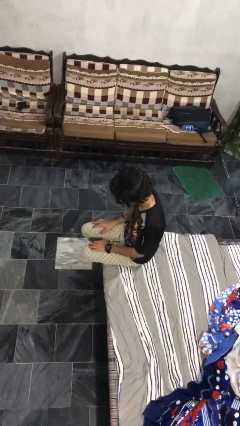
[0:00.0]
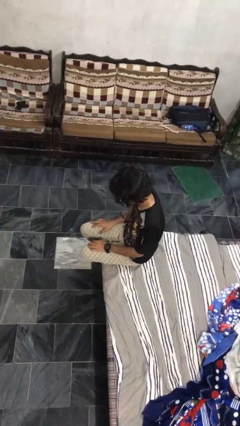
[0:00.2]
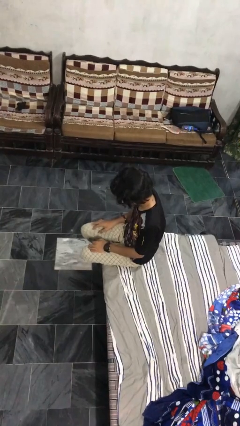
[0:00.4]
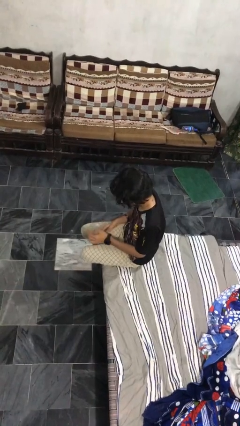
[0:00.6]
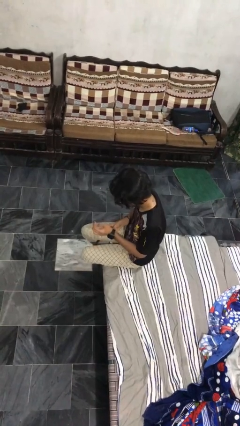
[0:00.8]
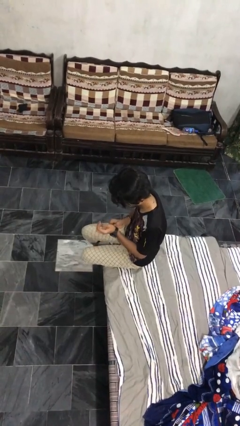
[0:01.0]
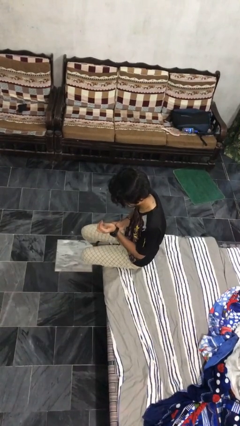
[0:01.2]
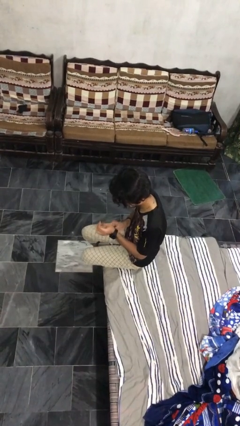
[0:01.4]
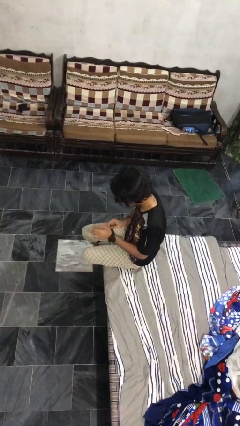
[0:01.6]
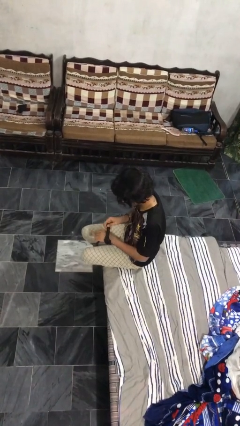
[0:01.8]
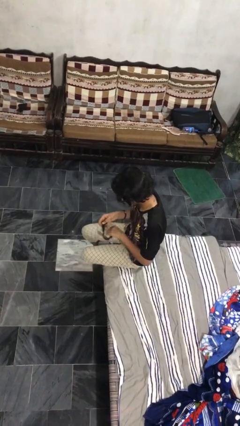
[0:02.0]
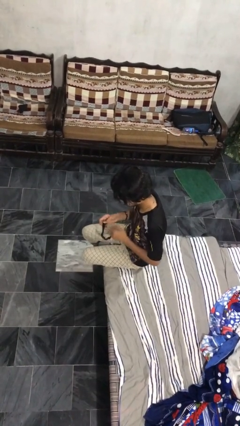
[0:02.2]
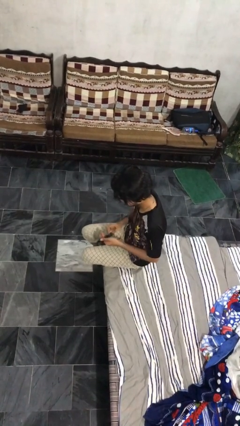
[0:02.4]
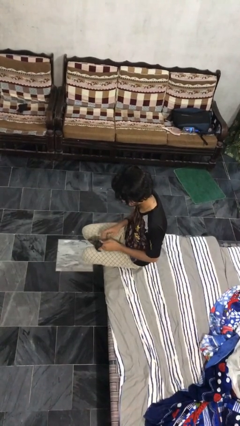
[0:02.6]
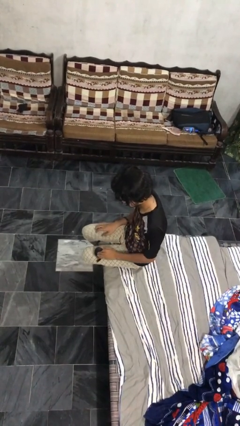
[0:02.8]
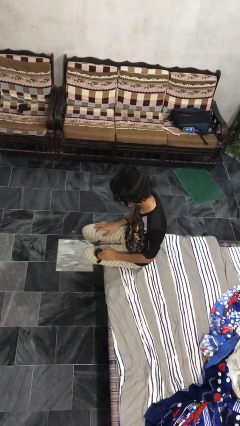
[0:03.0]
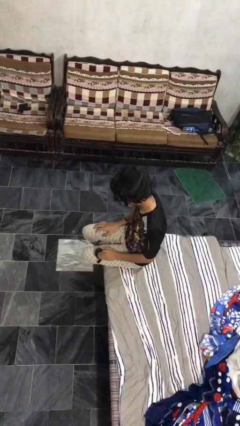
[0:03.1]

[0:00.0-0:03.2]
person takes off wristwatch

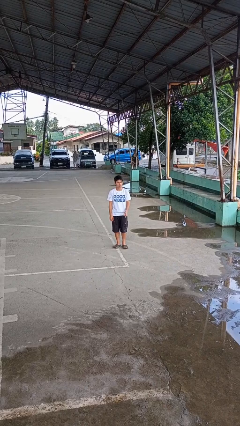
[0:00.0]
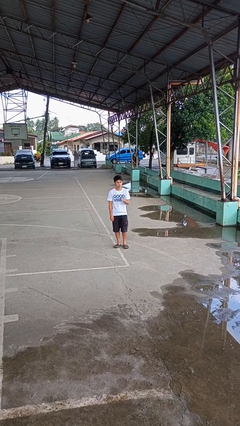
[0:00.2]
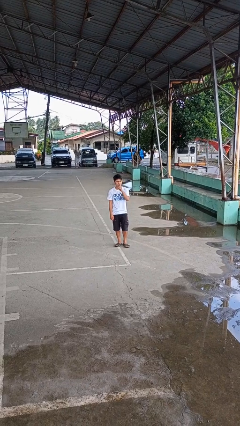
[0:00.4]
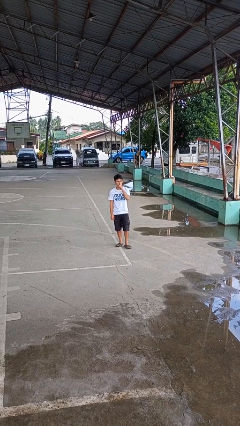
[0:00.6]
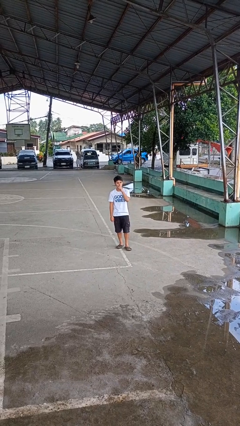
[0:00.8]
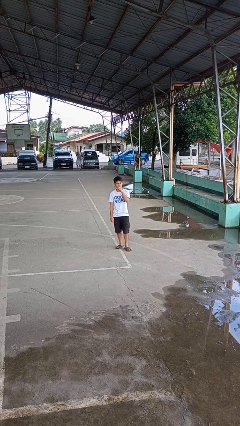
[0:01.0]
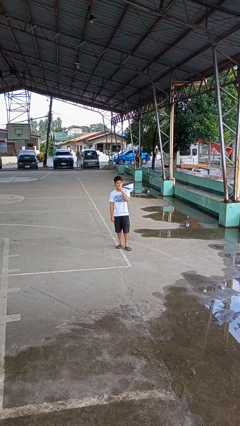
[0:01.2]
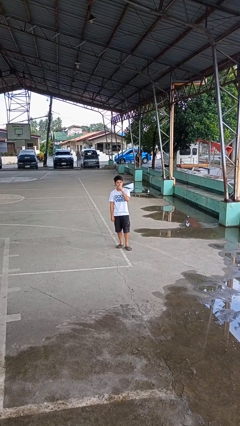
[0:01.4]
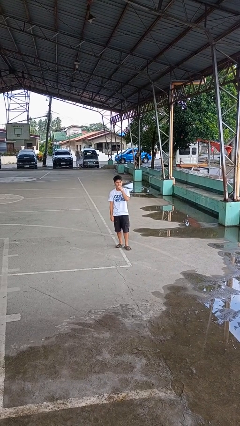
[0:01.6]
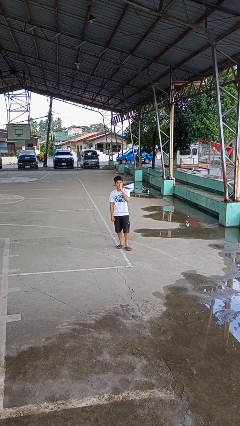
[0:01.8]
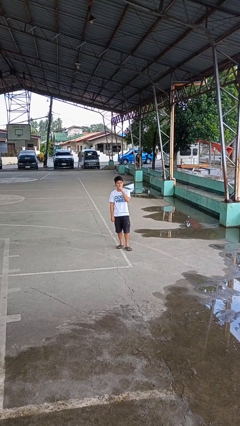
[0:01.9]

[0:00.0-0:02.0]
person gestures be quiet

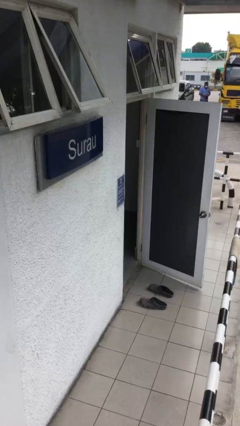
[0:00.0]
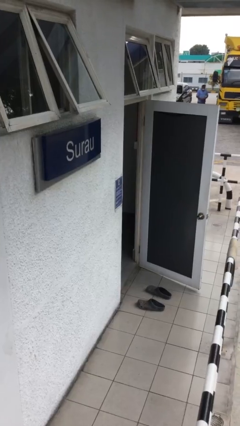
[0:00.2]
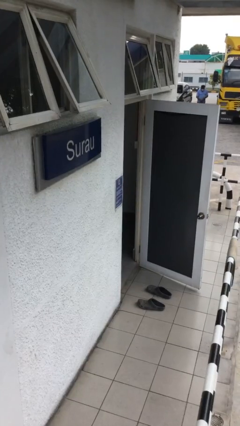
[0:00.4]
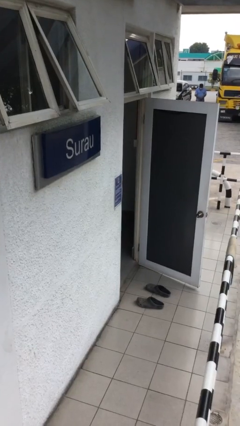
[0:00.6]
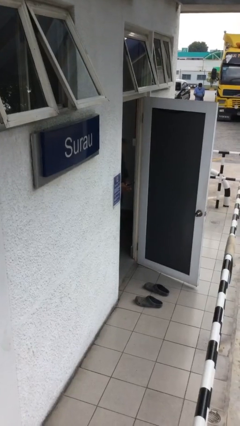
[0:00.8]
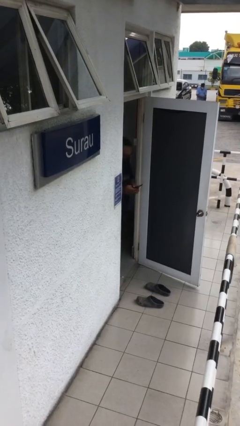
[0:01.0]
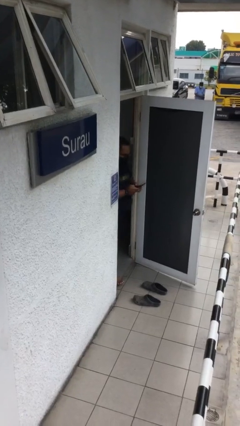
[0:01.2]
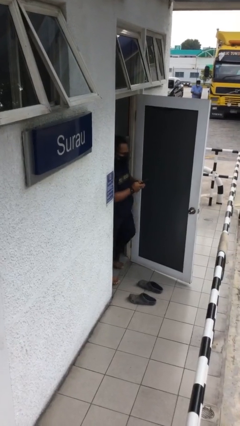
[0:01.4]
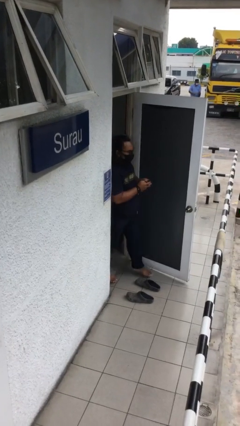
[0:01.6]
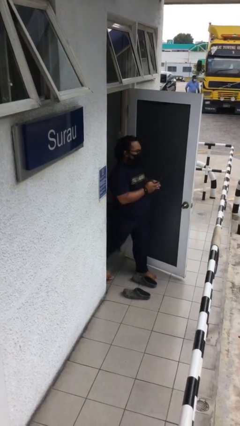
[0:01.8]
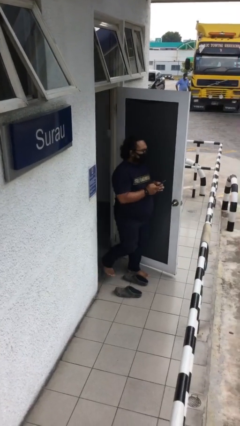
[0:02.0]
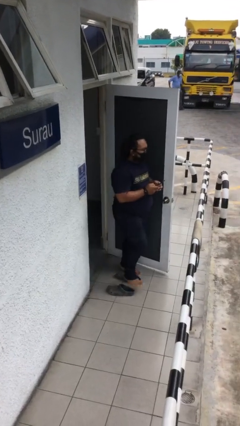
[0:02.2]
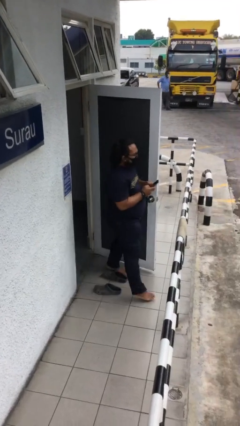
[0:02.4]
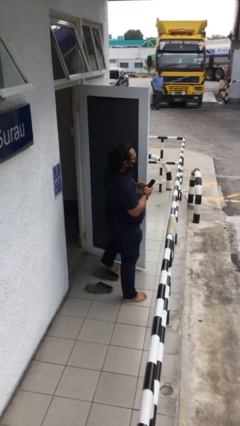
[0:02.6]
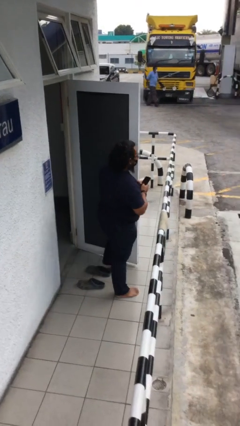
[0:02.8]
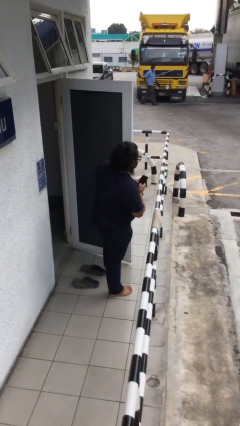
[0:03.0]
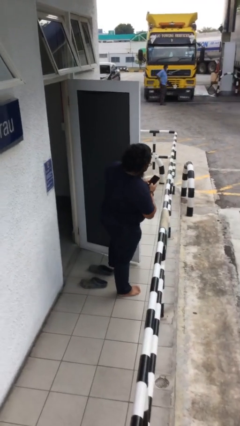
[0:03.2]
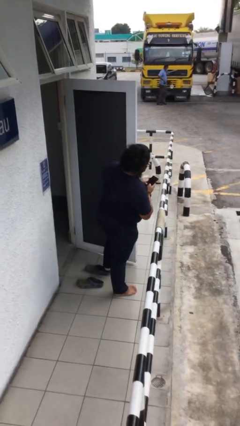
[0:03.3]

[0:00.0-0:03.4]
person enters scene through structure

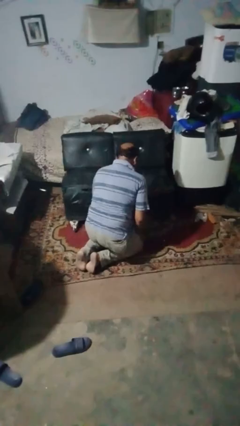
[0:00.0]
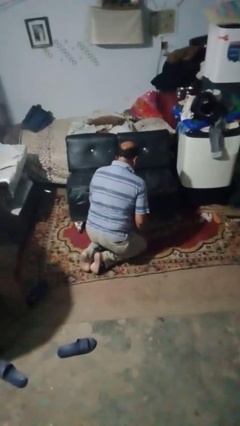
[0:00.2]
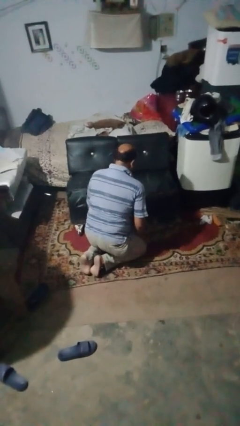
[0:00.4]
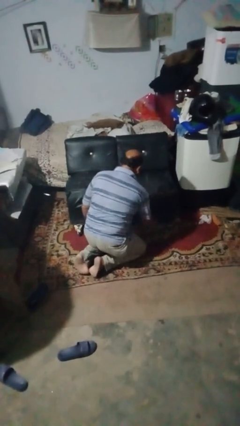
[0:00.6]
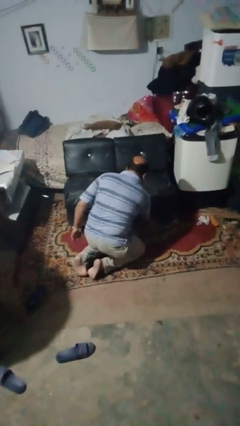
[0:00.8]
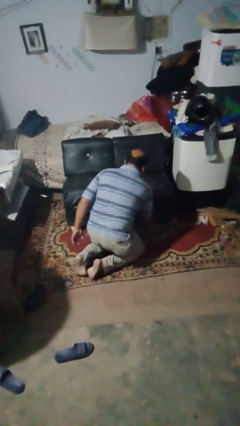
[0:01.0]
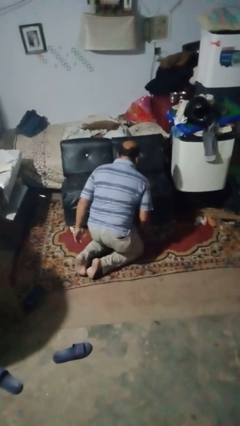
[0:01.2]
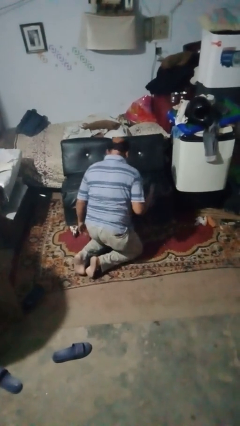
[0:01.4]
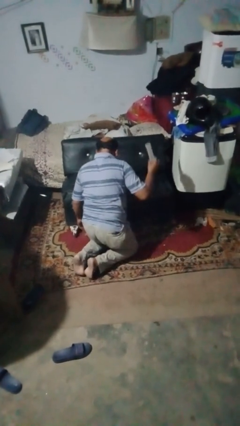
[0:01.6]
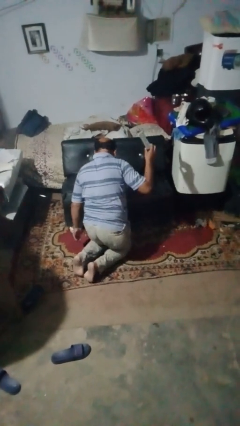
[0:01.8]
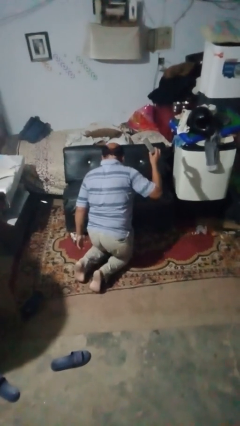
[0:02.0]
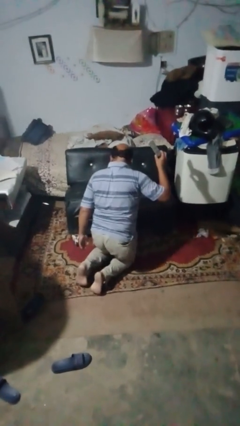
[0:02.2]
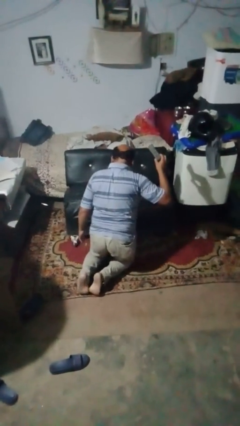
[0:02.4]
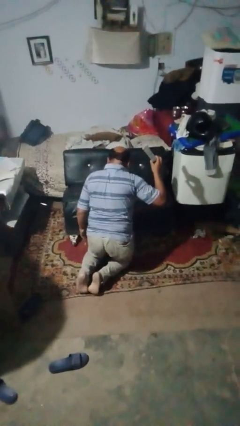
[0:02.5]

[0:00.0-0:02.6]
person searches under couch

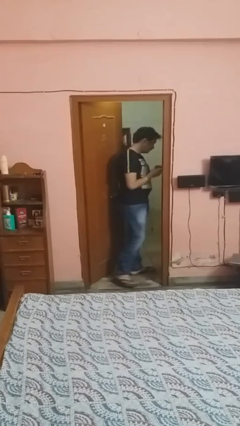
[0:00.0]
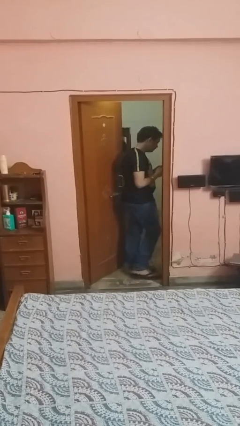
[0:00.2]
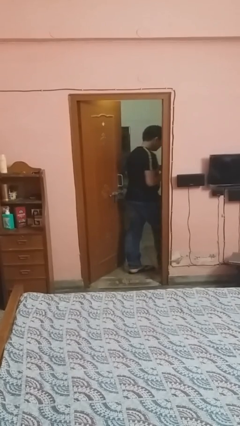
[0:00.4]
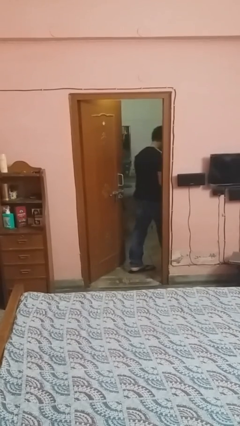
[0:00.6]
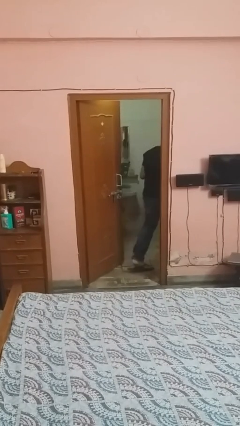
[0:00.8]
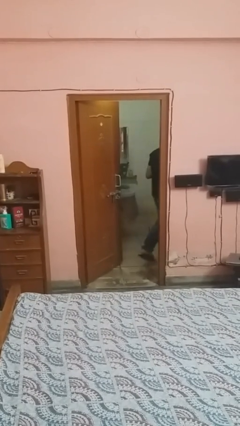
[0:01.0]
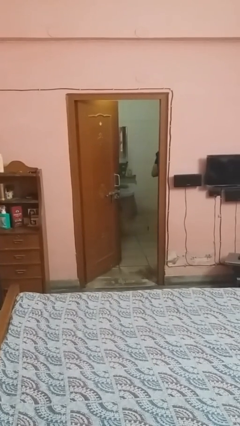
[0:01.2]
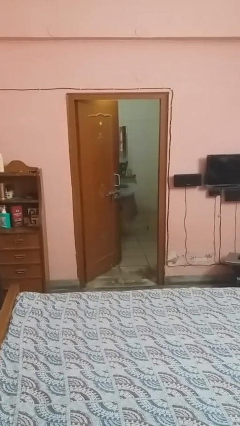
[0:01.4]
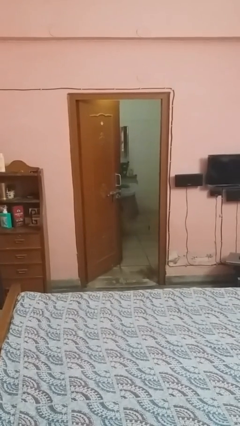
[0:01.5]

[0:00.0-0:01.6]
person exits scene through structure

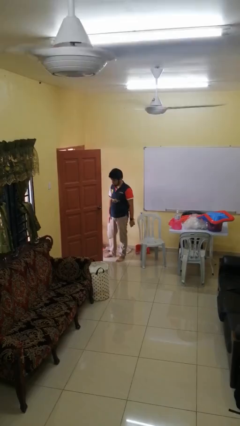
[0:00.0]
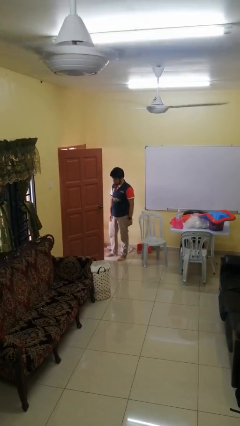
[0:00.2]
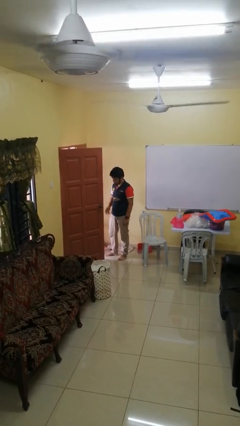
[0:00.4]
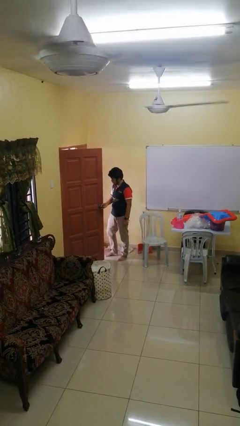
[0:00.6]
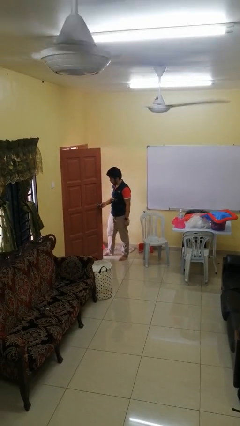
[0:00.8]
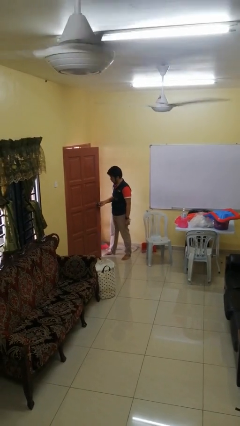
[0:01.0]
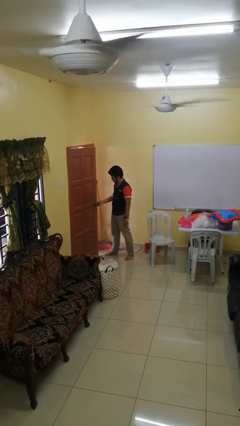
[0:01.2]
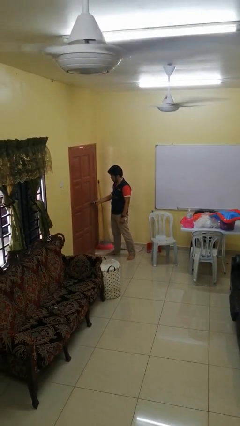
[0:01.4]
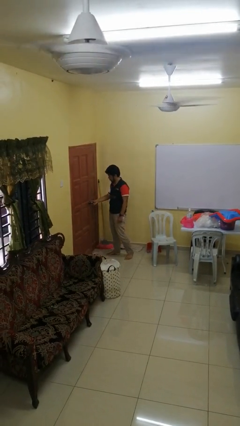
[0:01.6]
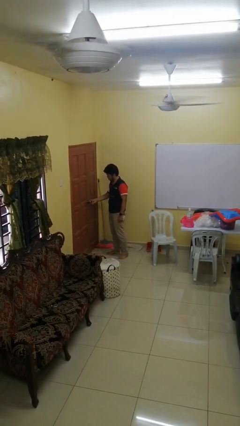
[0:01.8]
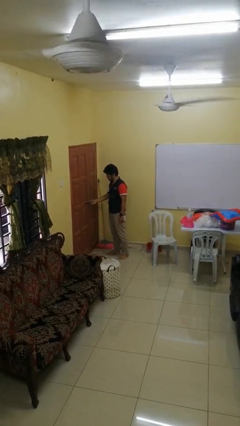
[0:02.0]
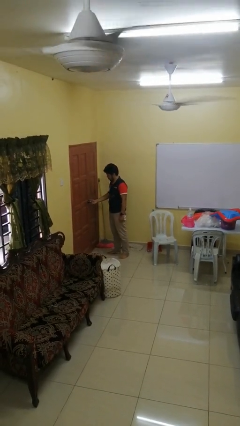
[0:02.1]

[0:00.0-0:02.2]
person closes facility door

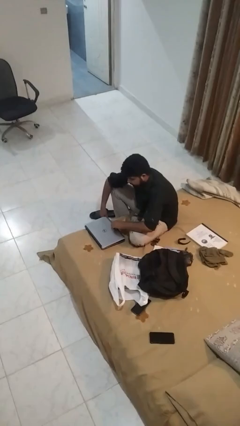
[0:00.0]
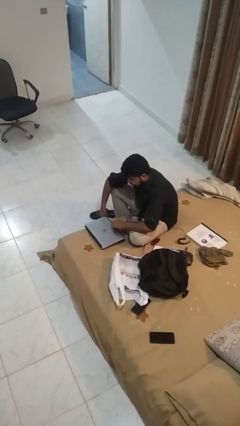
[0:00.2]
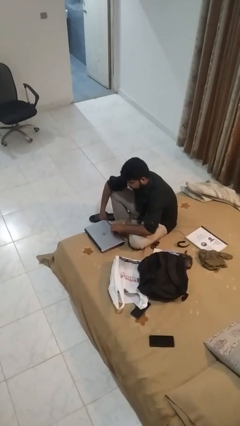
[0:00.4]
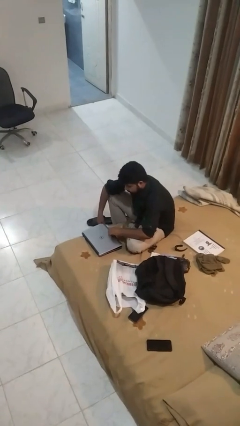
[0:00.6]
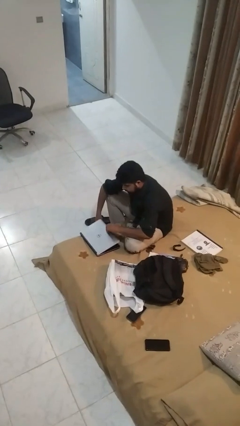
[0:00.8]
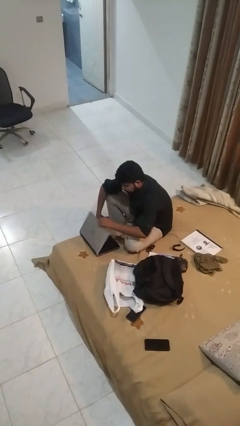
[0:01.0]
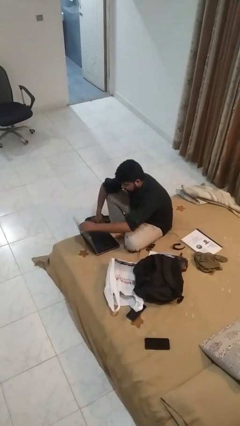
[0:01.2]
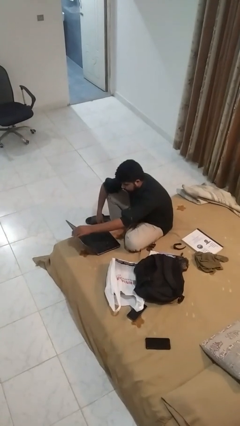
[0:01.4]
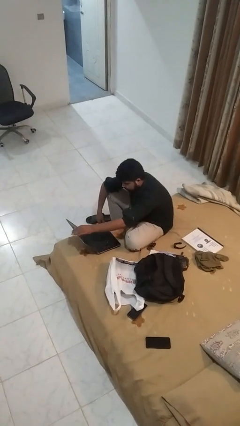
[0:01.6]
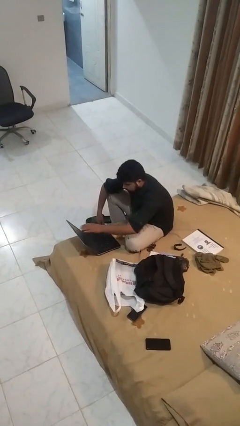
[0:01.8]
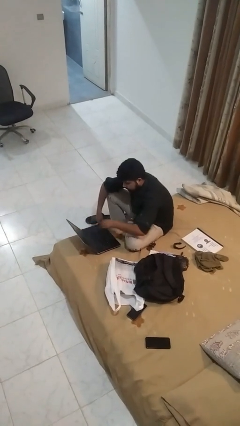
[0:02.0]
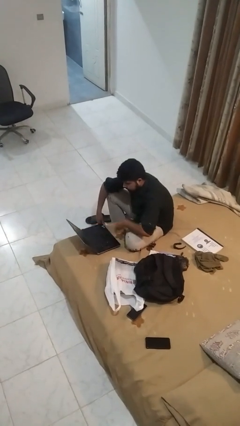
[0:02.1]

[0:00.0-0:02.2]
person opens laptop
